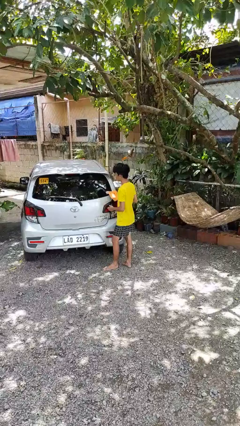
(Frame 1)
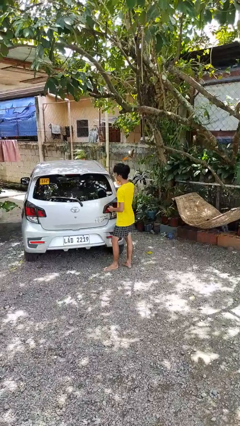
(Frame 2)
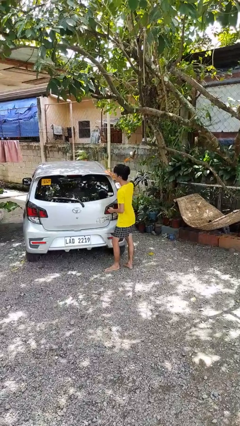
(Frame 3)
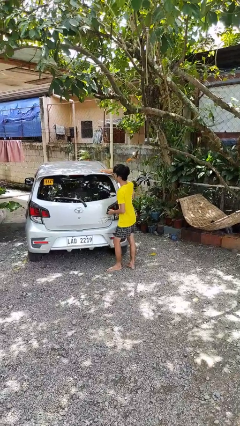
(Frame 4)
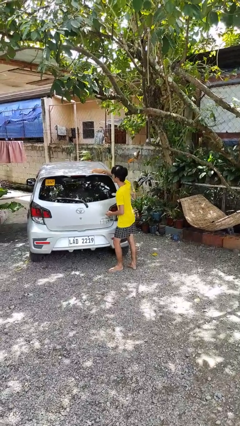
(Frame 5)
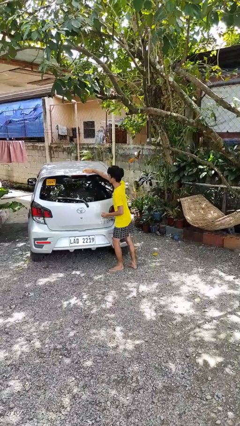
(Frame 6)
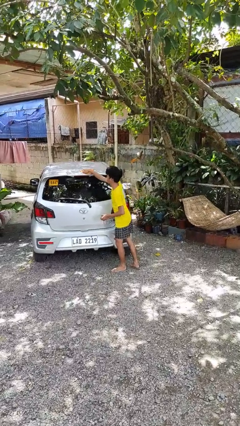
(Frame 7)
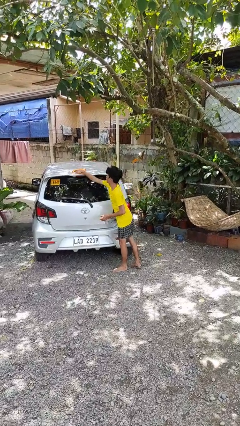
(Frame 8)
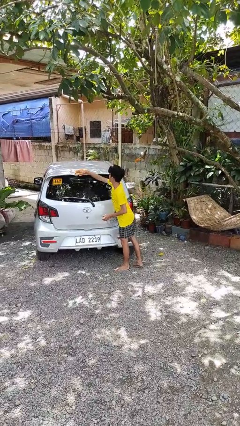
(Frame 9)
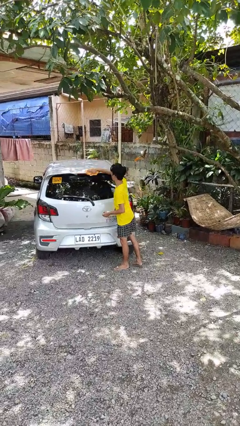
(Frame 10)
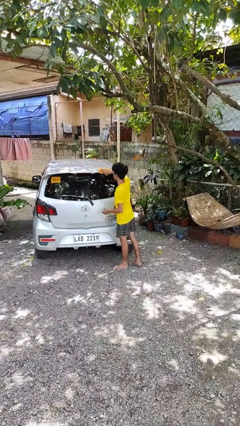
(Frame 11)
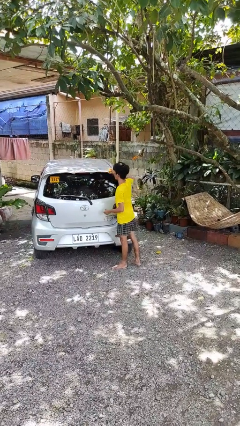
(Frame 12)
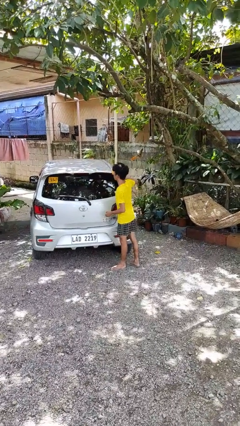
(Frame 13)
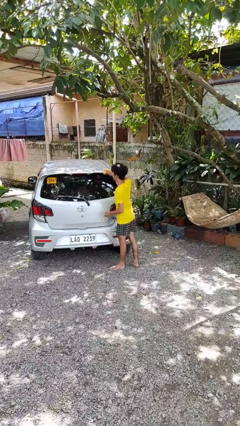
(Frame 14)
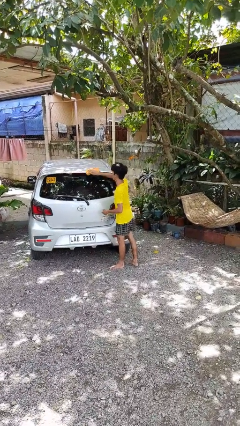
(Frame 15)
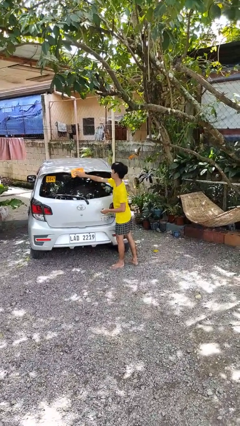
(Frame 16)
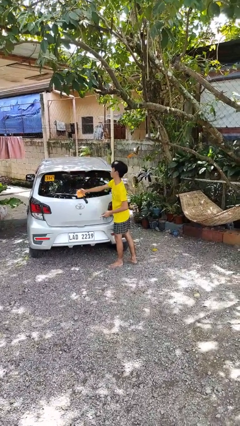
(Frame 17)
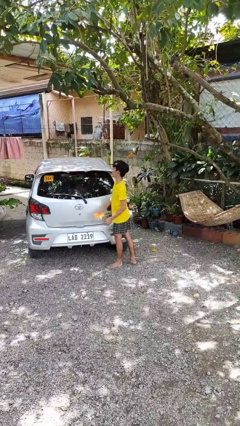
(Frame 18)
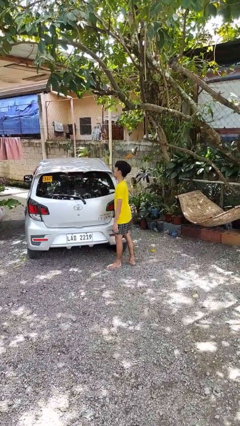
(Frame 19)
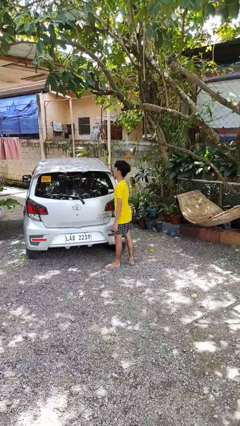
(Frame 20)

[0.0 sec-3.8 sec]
person polishes car with rag

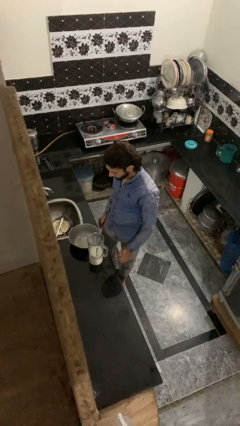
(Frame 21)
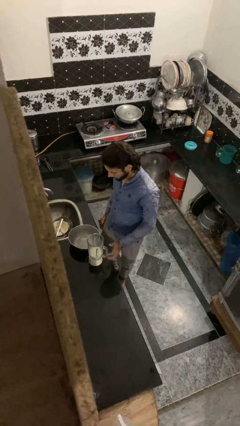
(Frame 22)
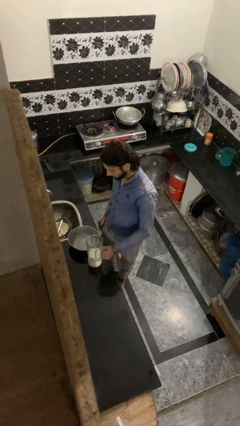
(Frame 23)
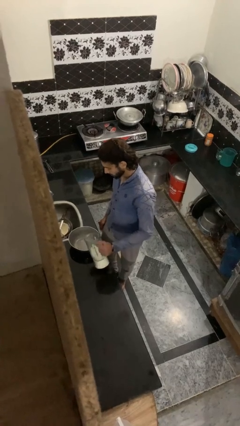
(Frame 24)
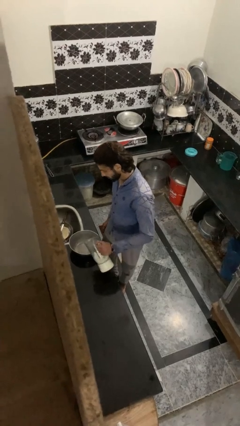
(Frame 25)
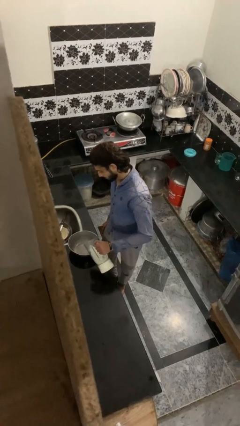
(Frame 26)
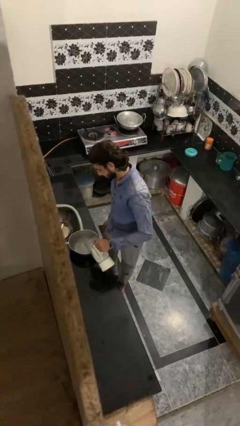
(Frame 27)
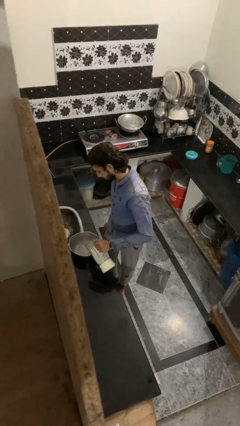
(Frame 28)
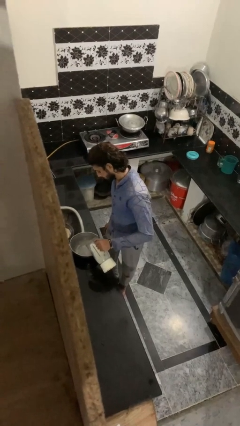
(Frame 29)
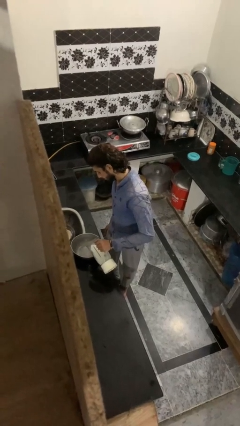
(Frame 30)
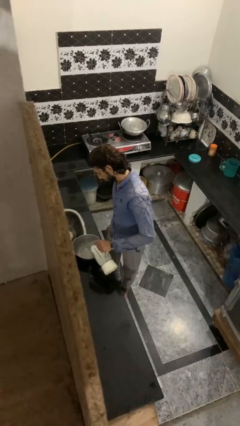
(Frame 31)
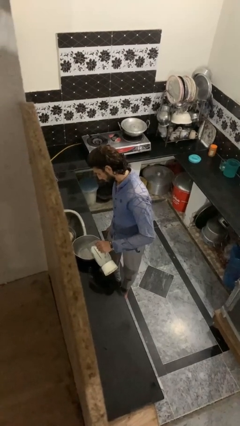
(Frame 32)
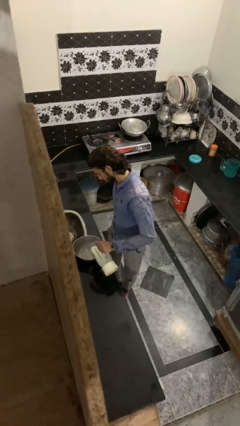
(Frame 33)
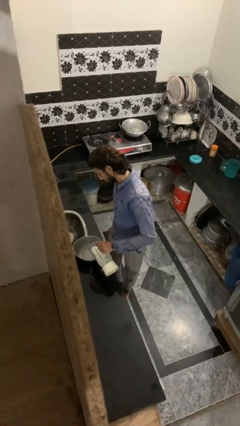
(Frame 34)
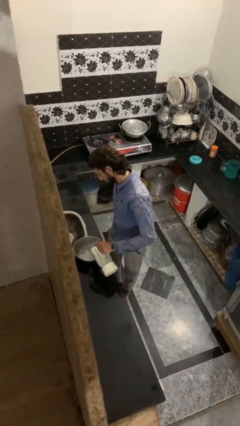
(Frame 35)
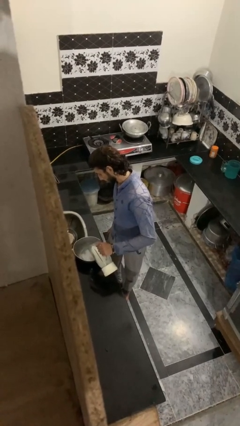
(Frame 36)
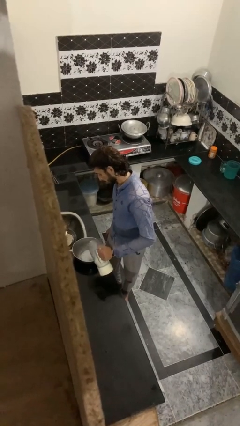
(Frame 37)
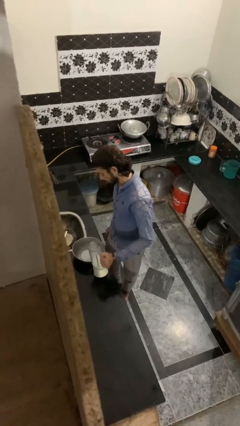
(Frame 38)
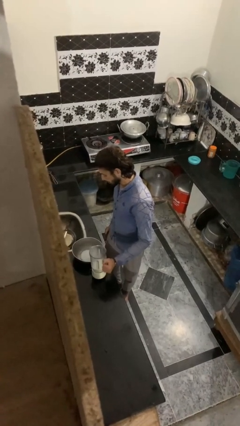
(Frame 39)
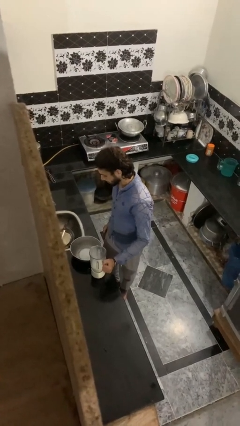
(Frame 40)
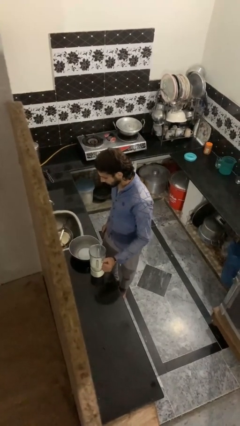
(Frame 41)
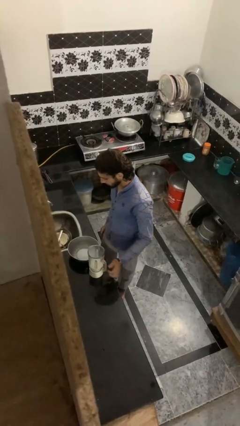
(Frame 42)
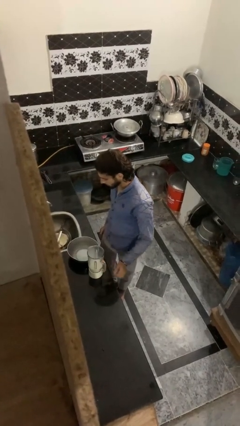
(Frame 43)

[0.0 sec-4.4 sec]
person pours into bowl

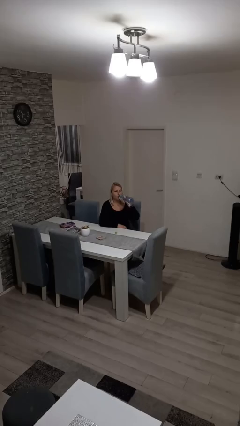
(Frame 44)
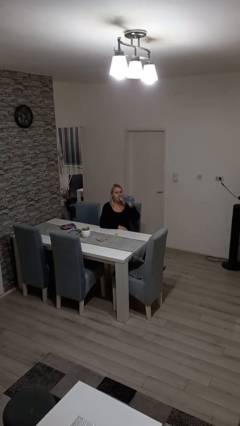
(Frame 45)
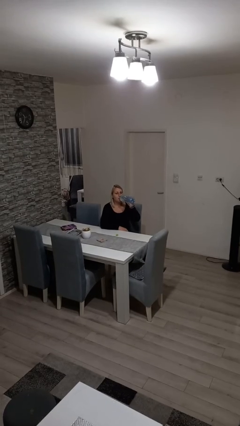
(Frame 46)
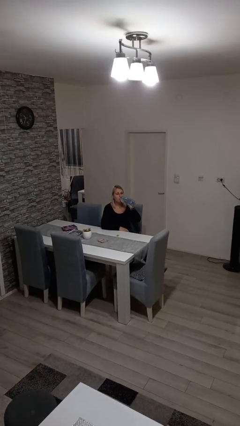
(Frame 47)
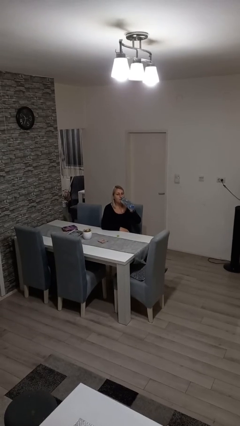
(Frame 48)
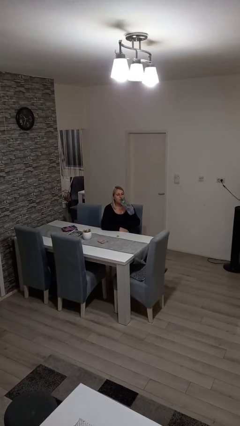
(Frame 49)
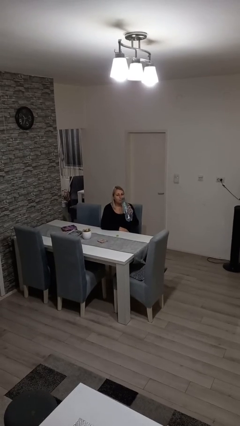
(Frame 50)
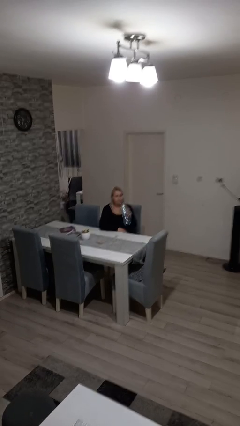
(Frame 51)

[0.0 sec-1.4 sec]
person drinks from bottle

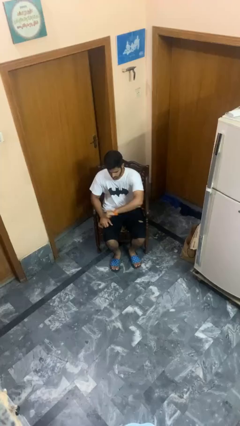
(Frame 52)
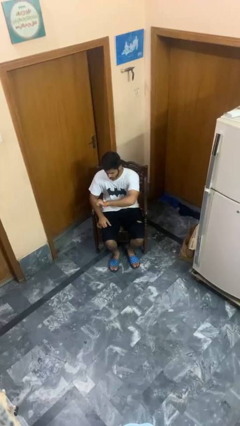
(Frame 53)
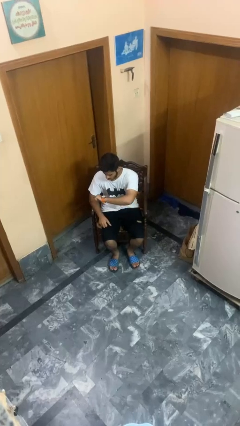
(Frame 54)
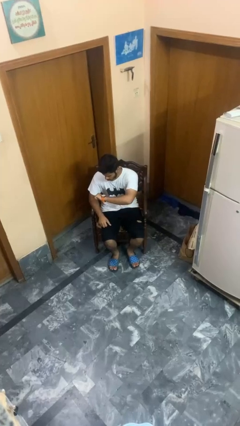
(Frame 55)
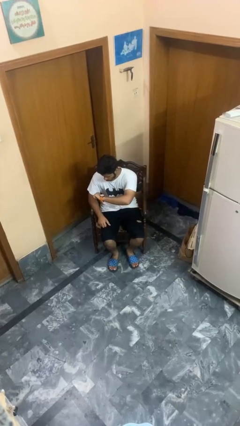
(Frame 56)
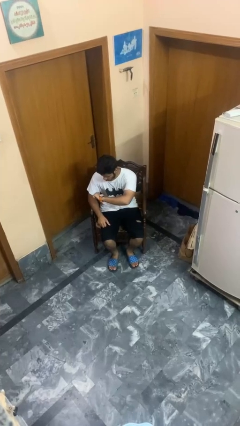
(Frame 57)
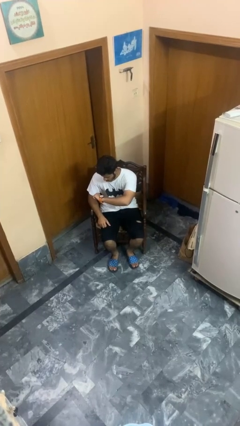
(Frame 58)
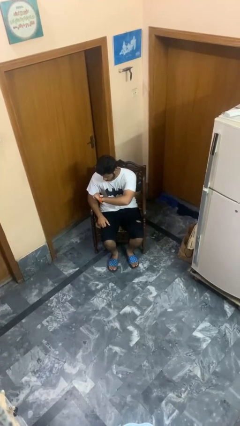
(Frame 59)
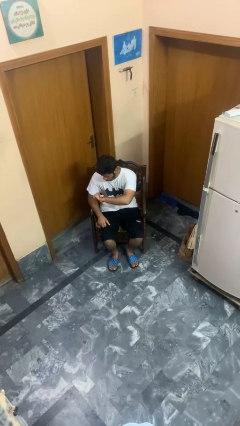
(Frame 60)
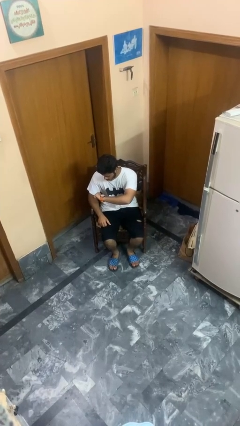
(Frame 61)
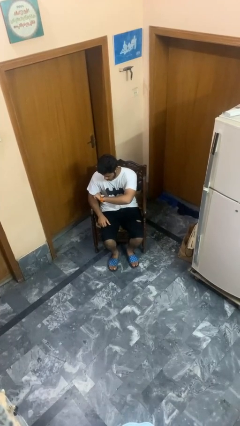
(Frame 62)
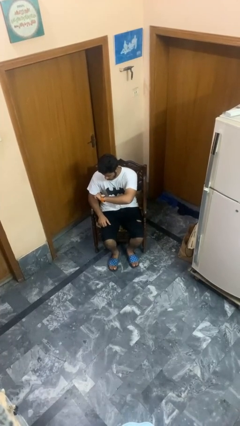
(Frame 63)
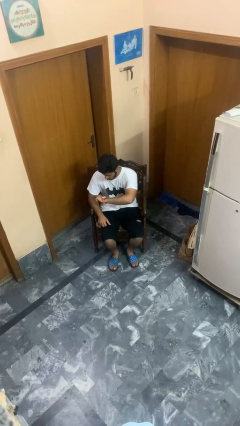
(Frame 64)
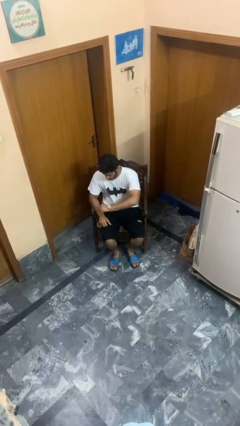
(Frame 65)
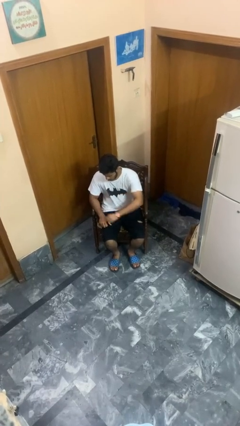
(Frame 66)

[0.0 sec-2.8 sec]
person looks at wristwatch

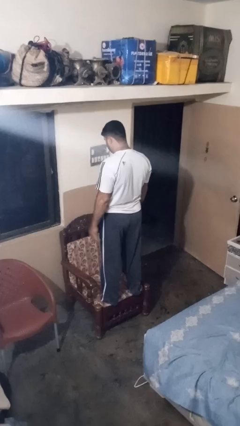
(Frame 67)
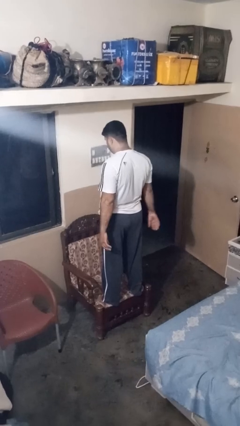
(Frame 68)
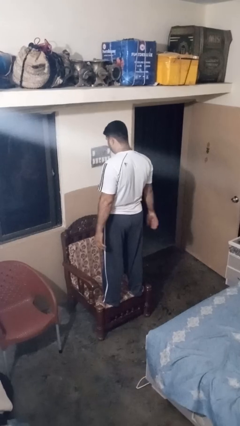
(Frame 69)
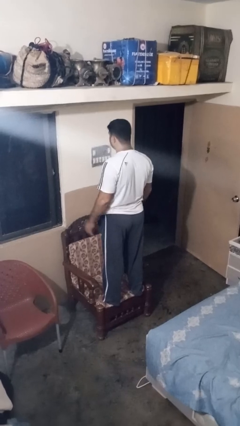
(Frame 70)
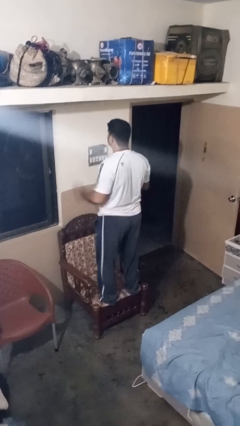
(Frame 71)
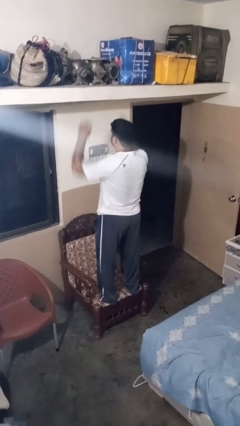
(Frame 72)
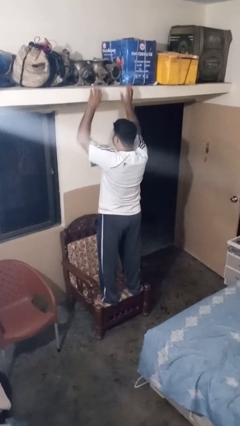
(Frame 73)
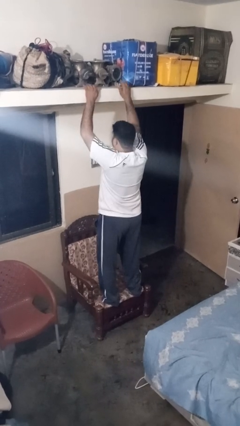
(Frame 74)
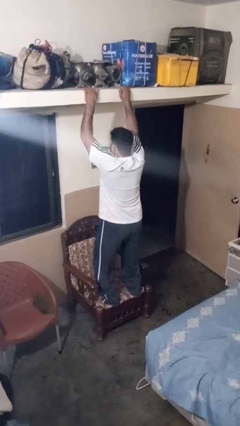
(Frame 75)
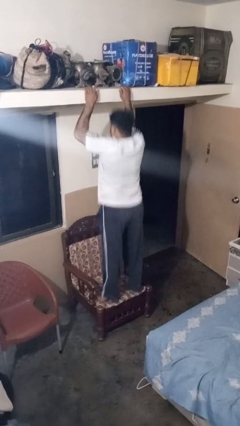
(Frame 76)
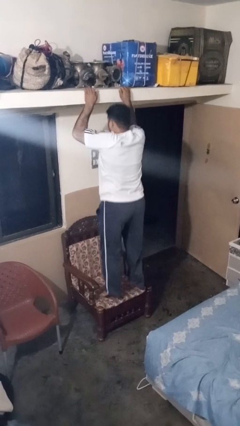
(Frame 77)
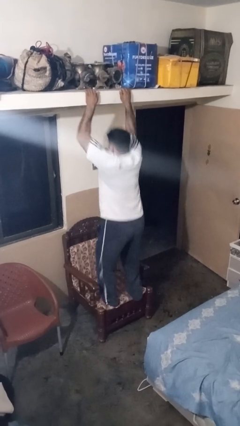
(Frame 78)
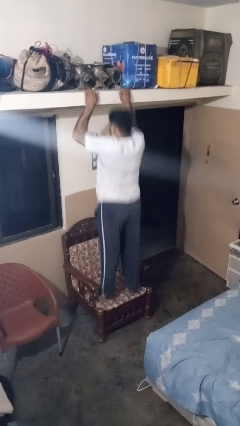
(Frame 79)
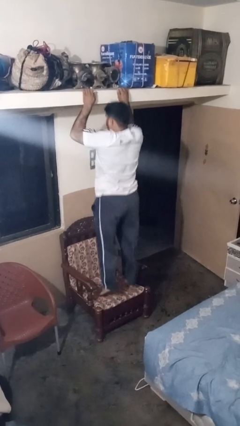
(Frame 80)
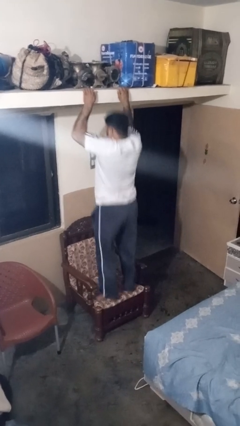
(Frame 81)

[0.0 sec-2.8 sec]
person jumps on couch

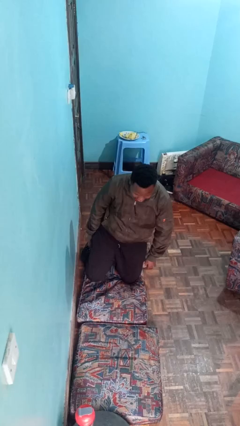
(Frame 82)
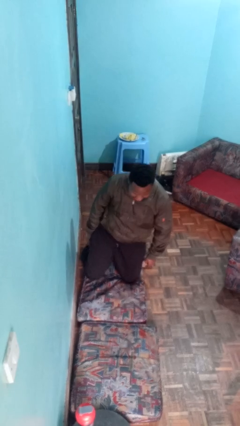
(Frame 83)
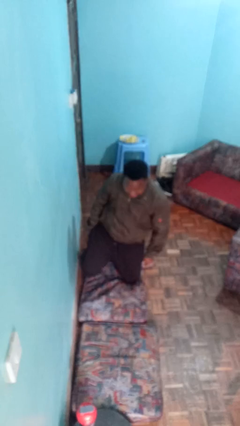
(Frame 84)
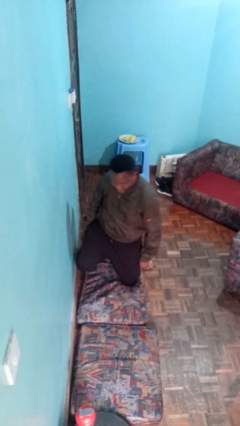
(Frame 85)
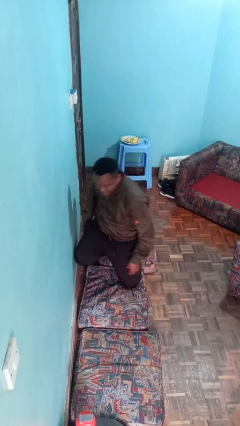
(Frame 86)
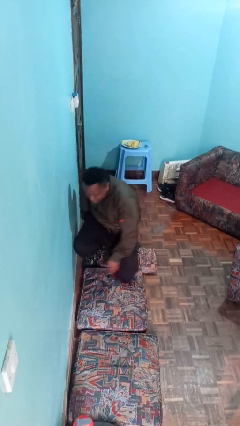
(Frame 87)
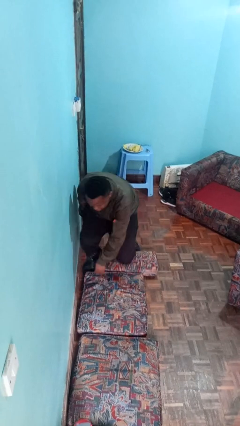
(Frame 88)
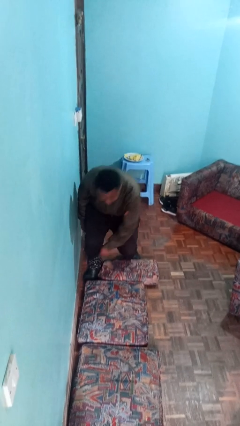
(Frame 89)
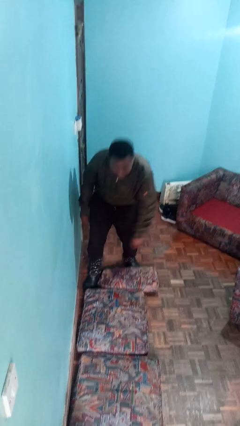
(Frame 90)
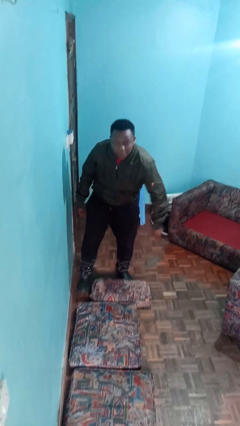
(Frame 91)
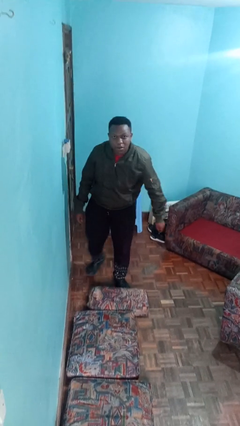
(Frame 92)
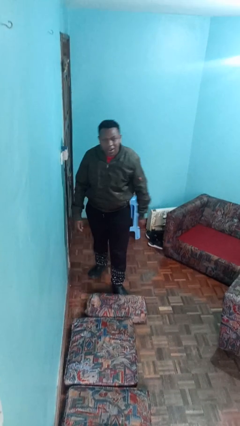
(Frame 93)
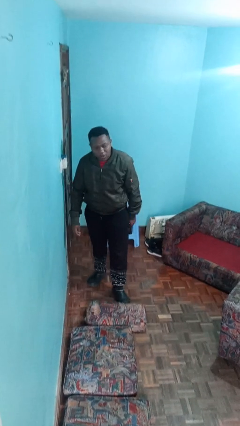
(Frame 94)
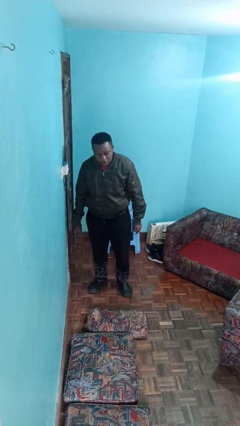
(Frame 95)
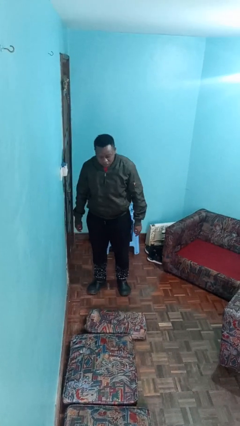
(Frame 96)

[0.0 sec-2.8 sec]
person stands up from floor
